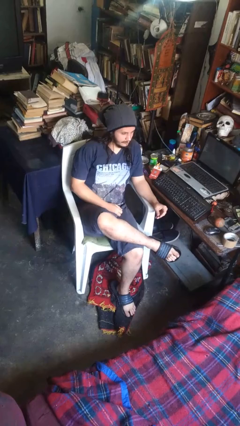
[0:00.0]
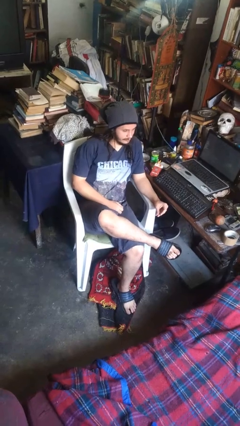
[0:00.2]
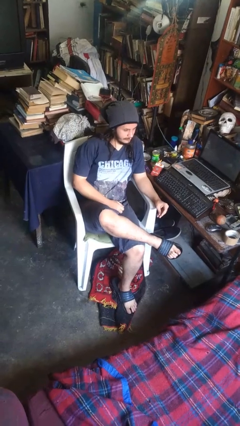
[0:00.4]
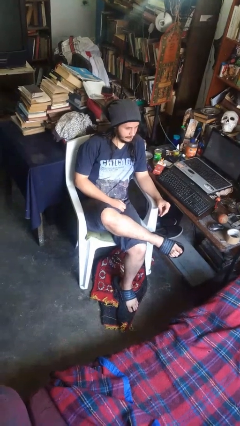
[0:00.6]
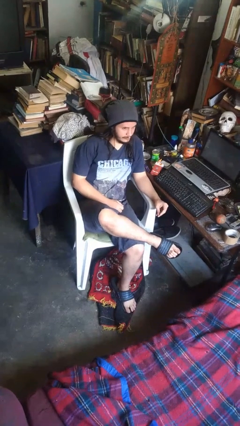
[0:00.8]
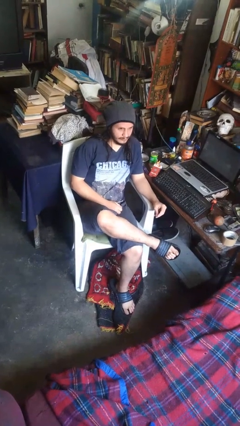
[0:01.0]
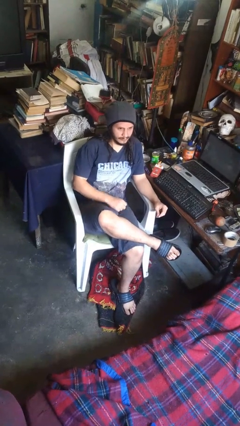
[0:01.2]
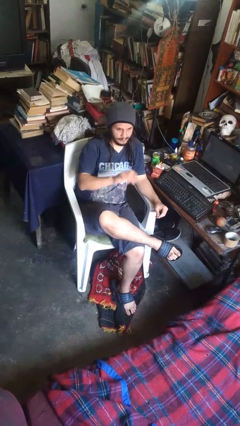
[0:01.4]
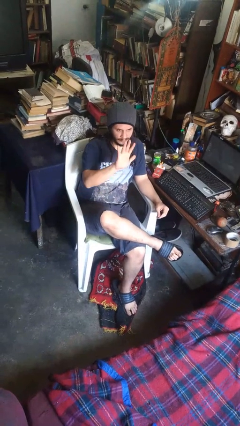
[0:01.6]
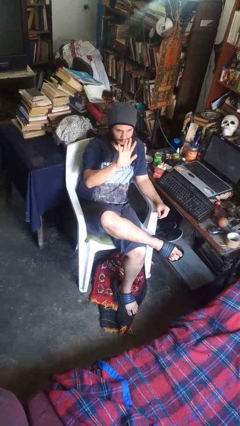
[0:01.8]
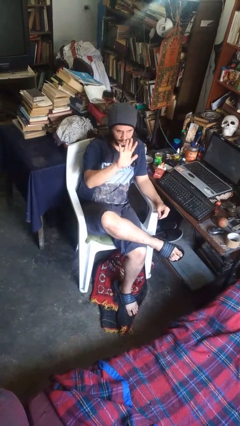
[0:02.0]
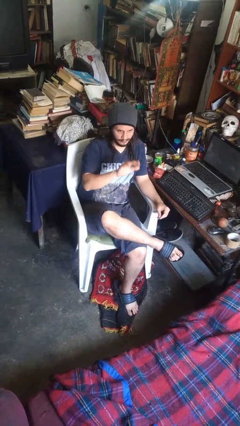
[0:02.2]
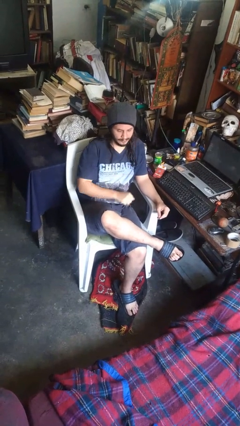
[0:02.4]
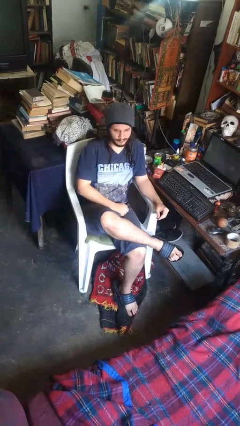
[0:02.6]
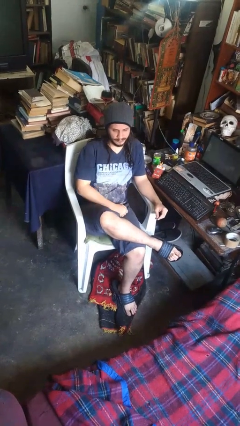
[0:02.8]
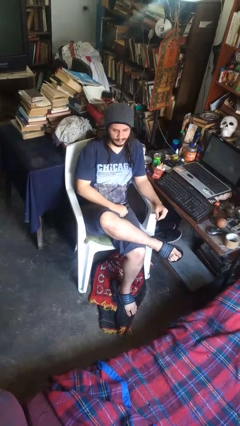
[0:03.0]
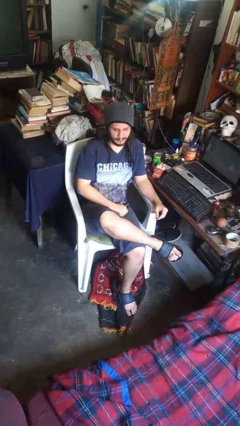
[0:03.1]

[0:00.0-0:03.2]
person gestures number five

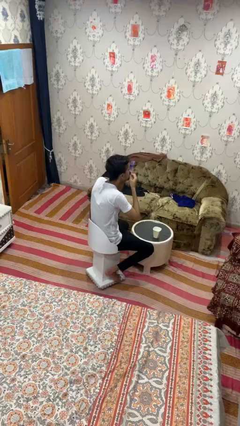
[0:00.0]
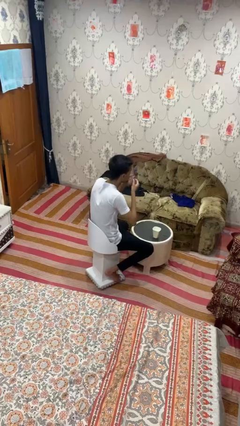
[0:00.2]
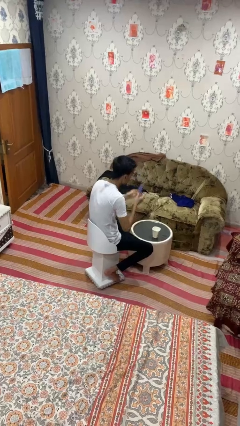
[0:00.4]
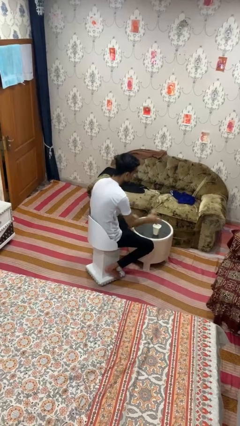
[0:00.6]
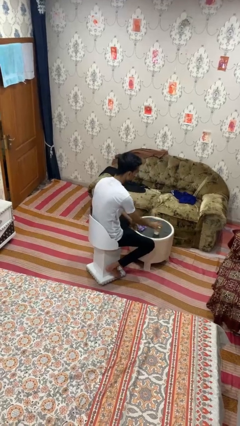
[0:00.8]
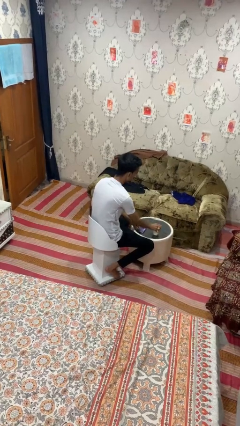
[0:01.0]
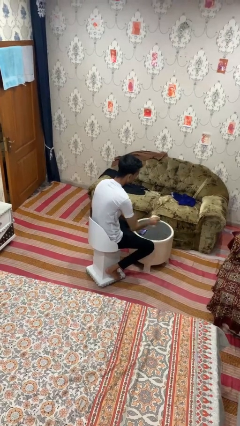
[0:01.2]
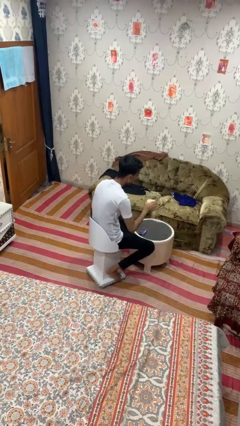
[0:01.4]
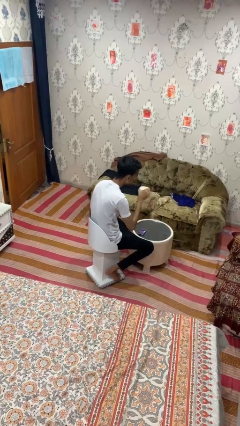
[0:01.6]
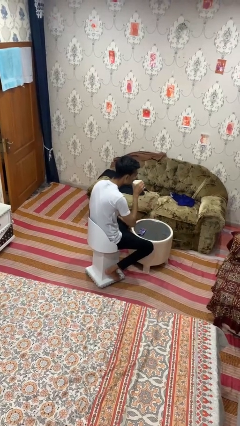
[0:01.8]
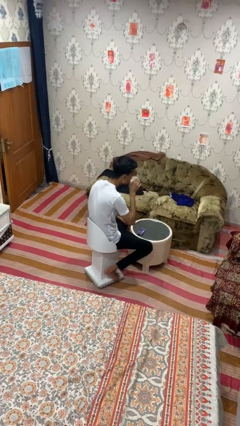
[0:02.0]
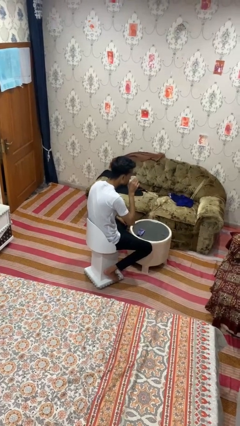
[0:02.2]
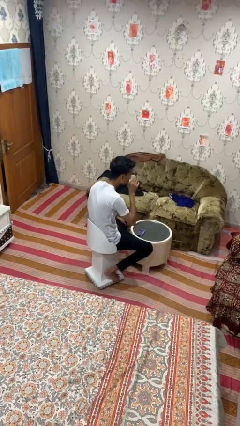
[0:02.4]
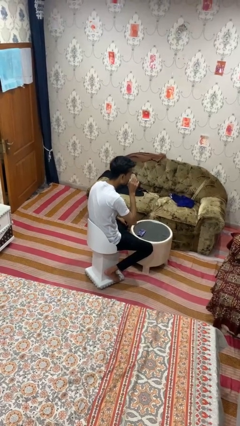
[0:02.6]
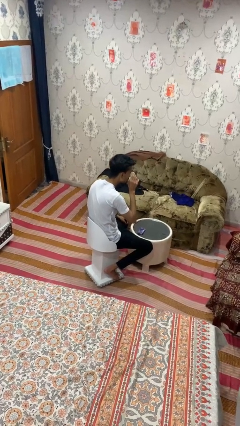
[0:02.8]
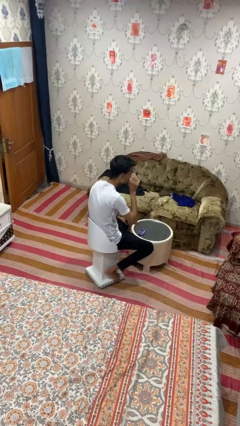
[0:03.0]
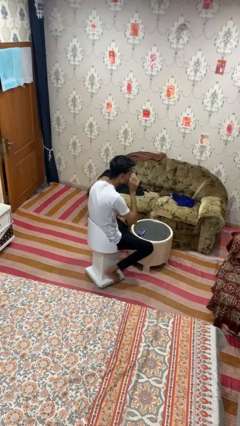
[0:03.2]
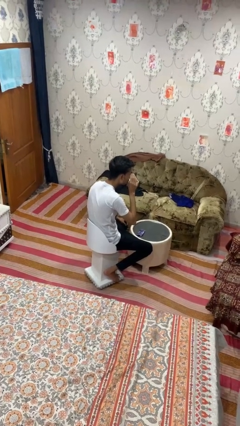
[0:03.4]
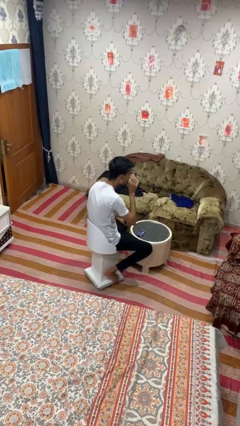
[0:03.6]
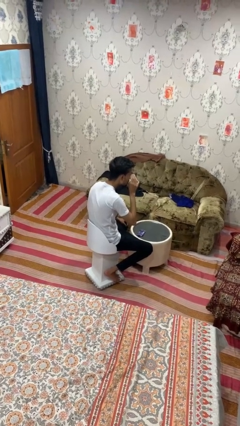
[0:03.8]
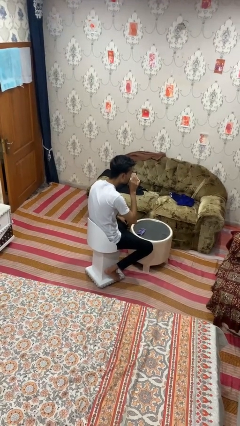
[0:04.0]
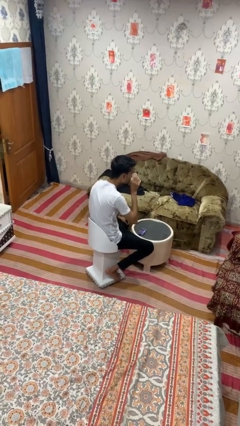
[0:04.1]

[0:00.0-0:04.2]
person drinks from cup

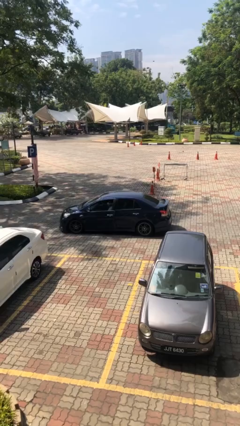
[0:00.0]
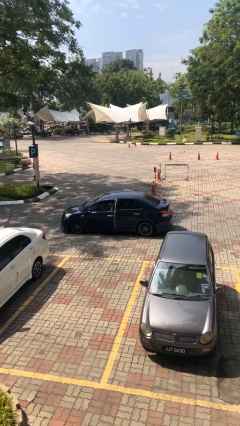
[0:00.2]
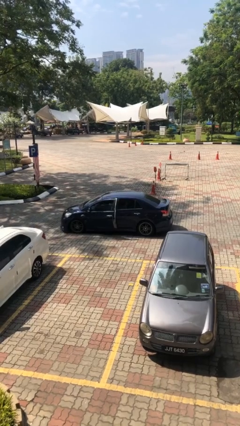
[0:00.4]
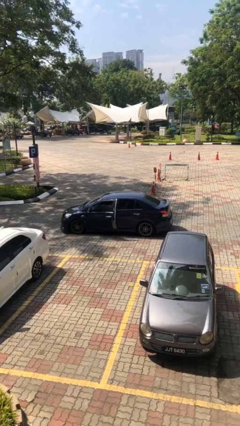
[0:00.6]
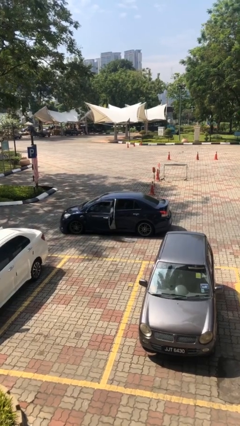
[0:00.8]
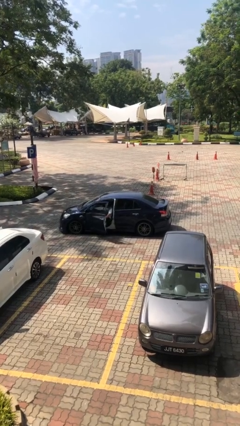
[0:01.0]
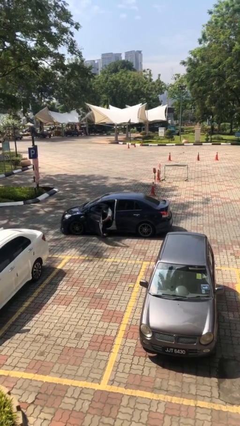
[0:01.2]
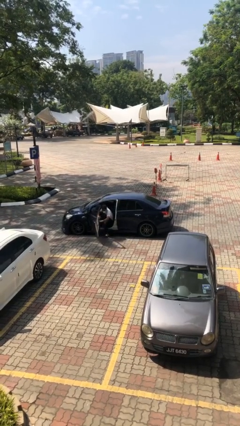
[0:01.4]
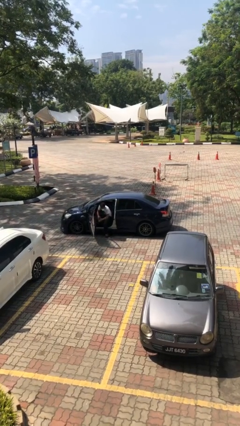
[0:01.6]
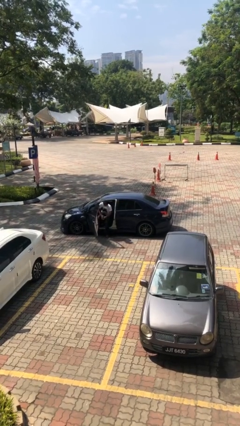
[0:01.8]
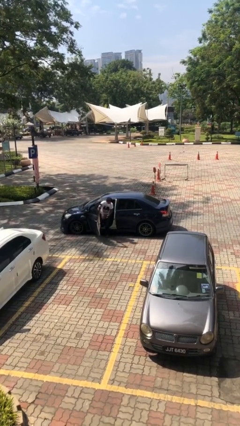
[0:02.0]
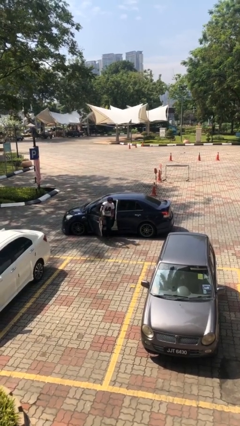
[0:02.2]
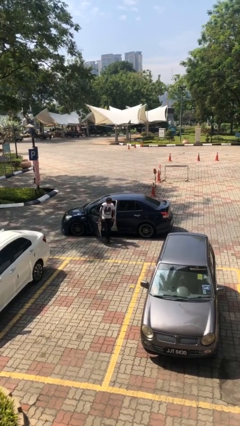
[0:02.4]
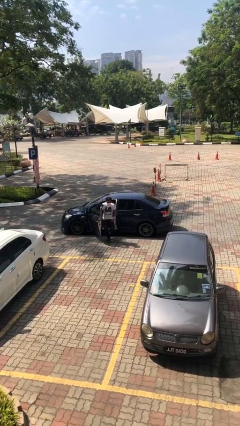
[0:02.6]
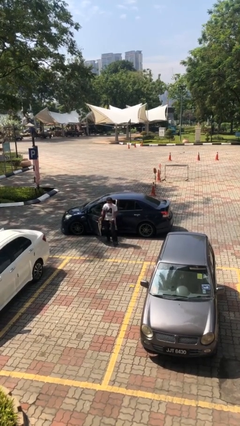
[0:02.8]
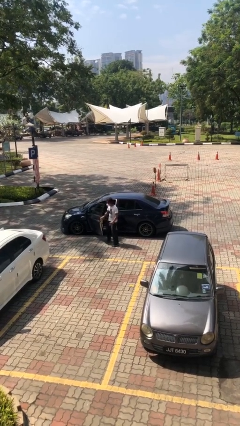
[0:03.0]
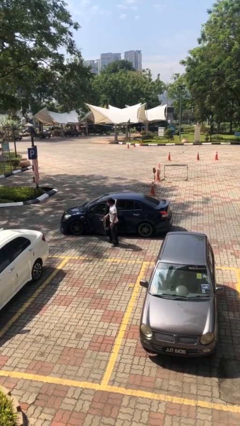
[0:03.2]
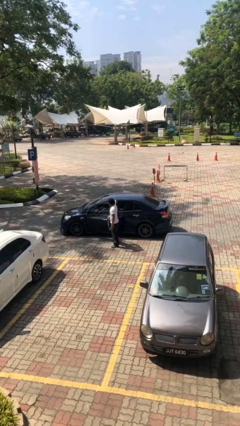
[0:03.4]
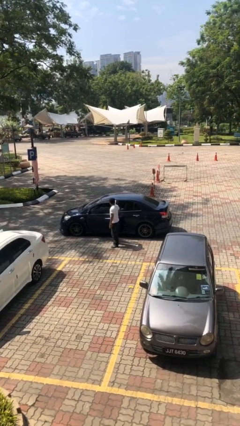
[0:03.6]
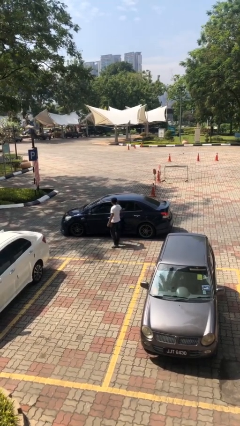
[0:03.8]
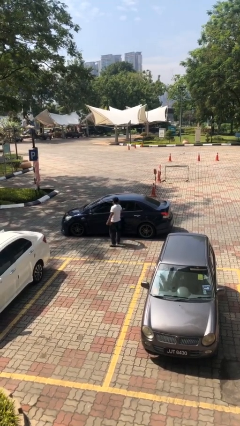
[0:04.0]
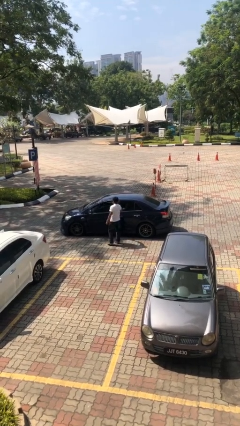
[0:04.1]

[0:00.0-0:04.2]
car drops off person

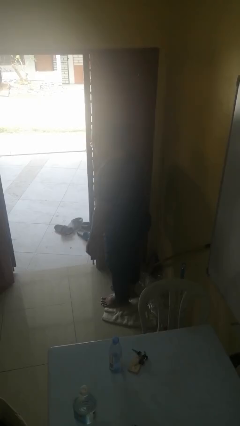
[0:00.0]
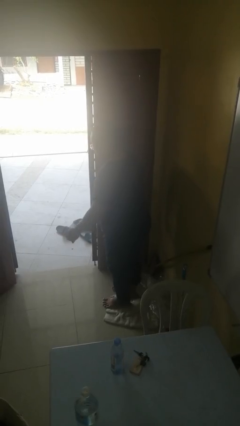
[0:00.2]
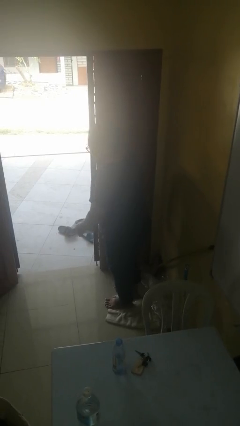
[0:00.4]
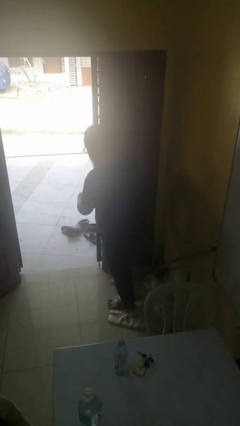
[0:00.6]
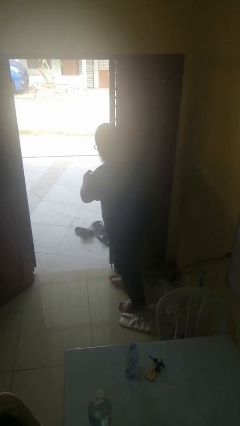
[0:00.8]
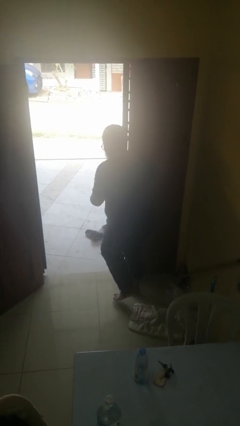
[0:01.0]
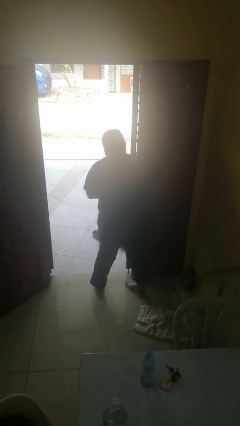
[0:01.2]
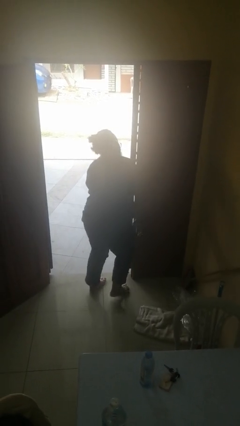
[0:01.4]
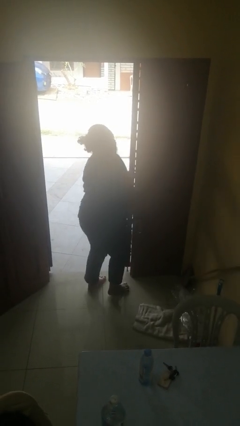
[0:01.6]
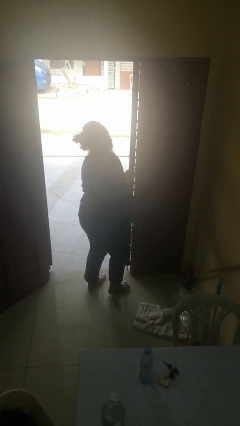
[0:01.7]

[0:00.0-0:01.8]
person bumps into wall

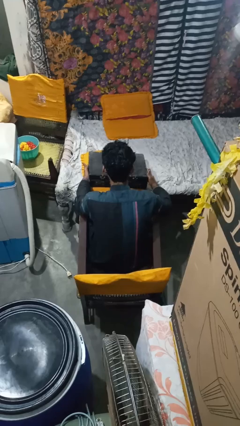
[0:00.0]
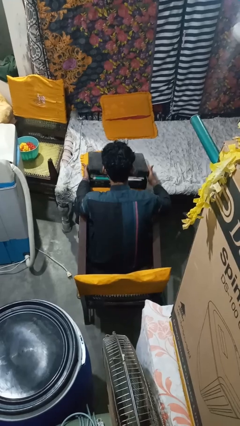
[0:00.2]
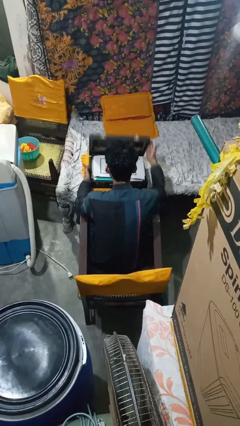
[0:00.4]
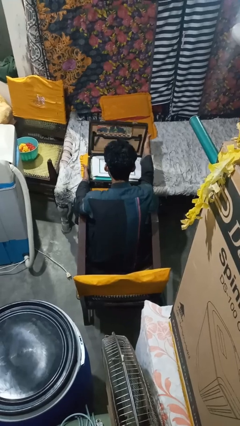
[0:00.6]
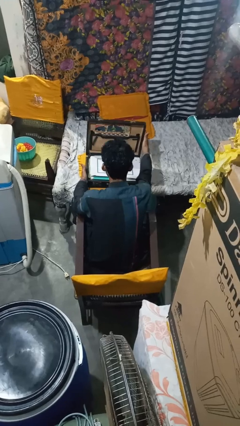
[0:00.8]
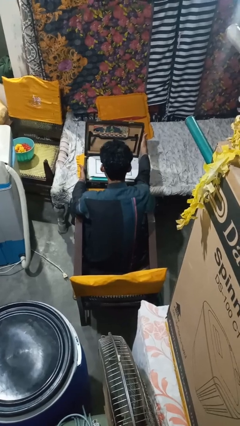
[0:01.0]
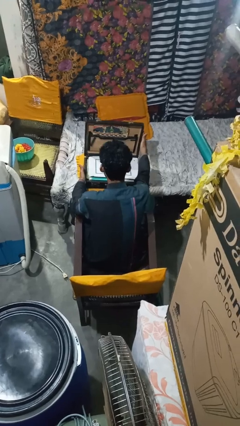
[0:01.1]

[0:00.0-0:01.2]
person opens suitcase

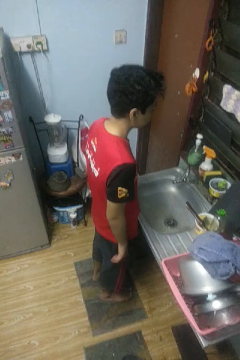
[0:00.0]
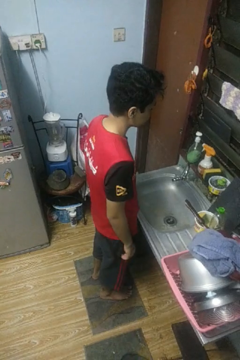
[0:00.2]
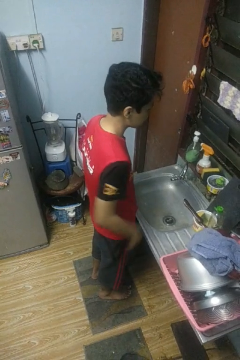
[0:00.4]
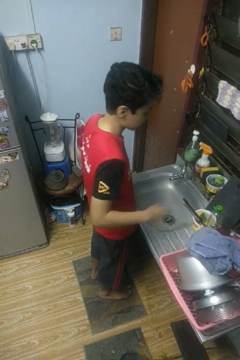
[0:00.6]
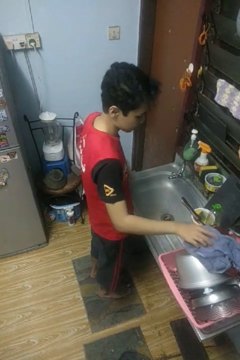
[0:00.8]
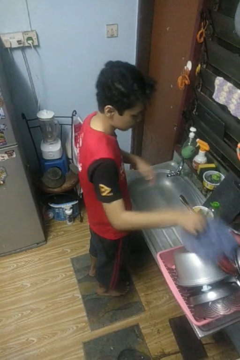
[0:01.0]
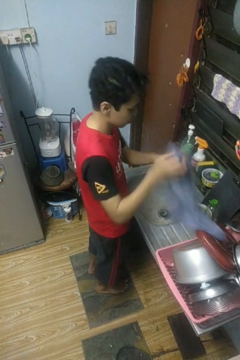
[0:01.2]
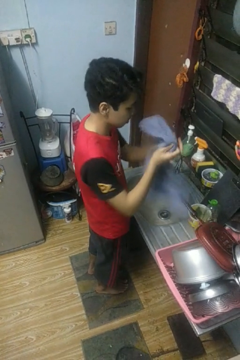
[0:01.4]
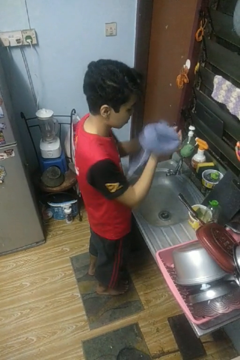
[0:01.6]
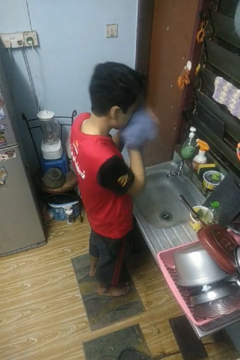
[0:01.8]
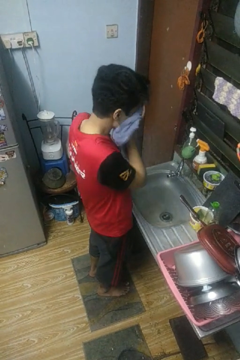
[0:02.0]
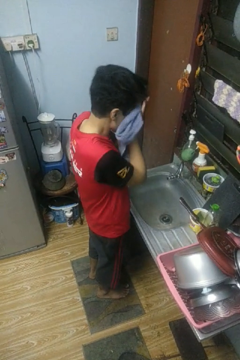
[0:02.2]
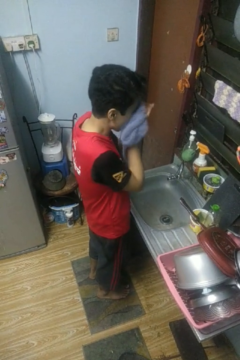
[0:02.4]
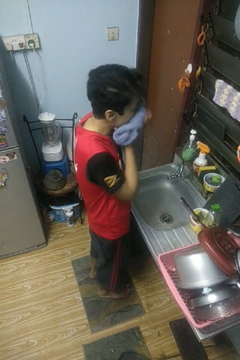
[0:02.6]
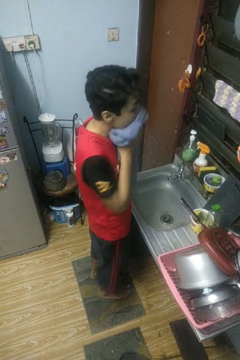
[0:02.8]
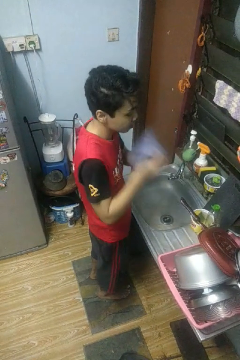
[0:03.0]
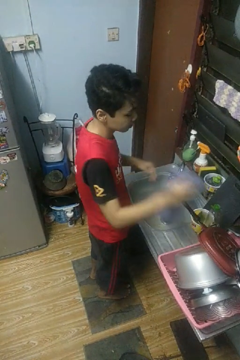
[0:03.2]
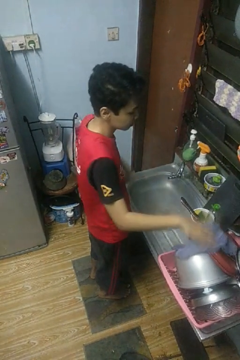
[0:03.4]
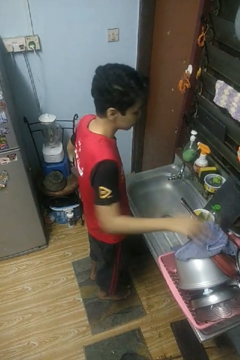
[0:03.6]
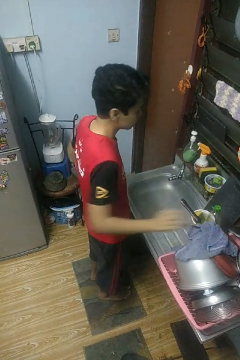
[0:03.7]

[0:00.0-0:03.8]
person dries face with towel
